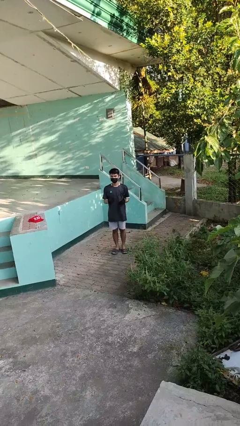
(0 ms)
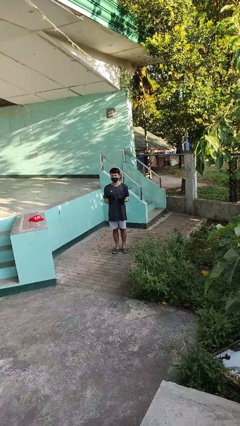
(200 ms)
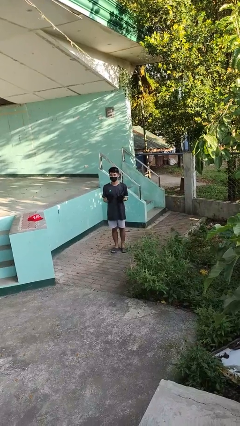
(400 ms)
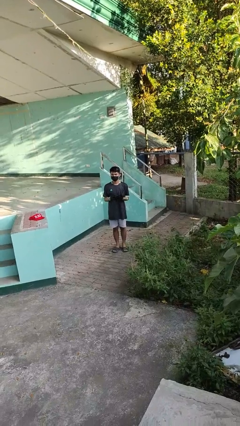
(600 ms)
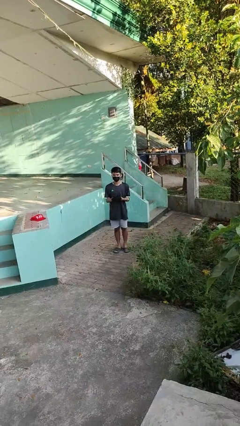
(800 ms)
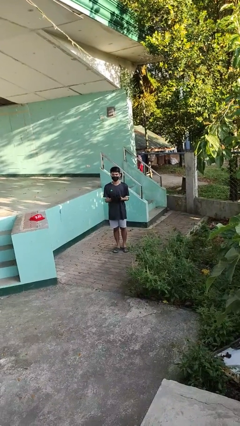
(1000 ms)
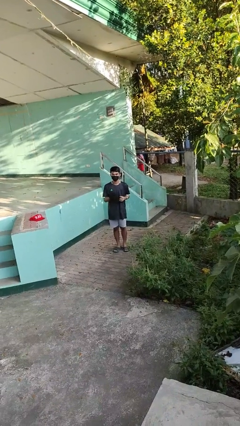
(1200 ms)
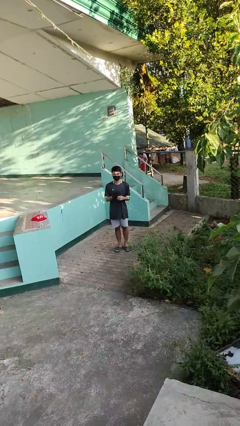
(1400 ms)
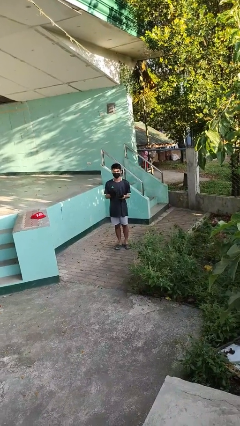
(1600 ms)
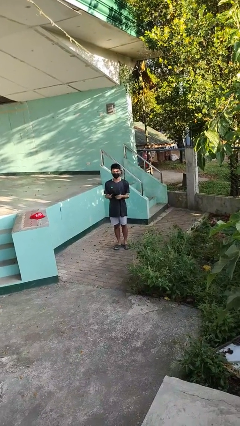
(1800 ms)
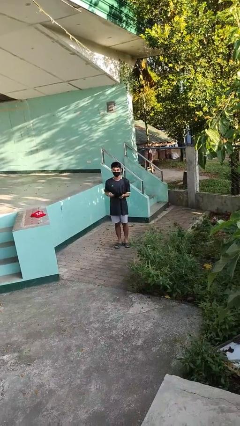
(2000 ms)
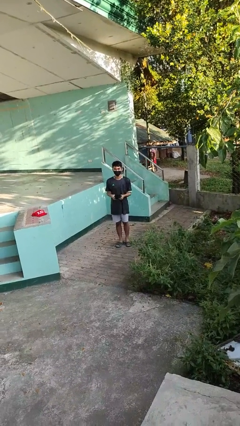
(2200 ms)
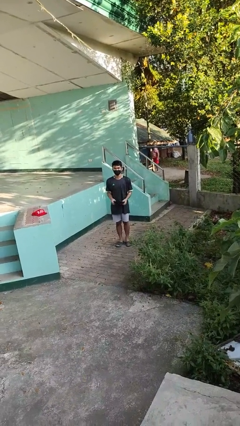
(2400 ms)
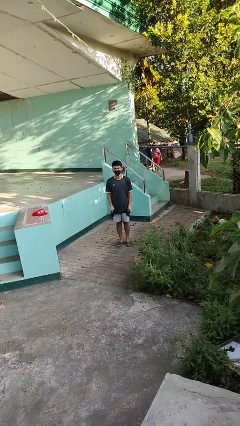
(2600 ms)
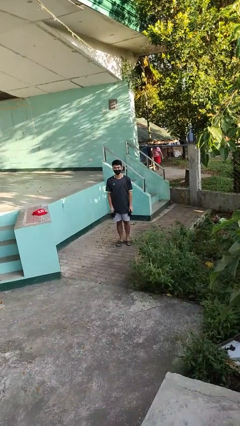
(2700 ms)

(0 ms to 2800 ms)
person takes off gloves

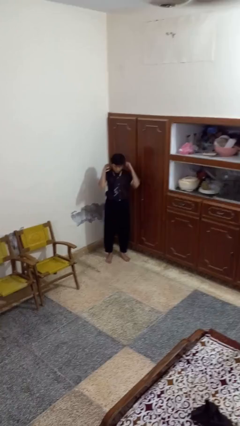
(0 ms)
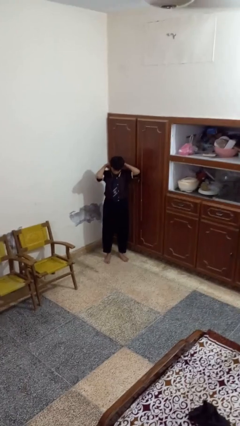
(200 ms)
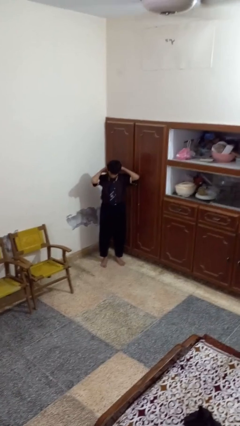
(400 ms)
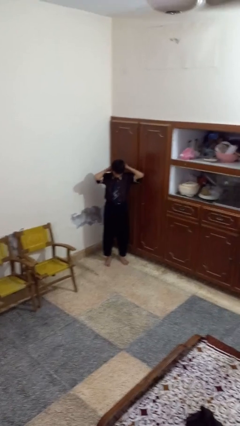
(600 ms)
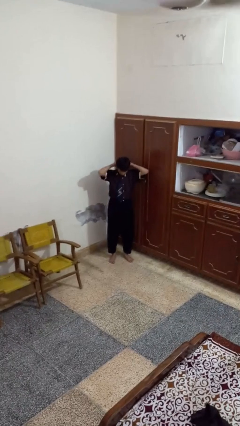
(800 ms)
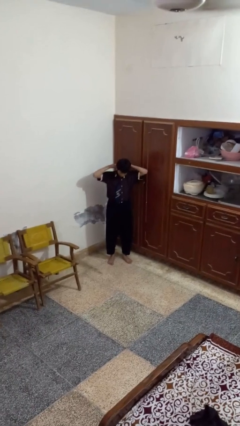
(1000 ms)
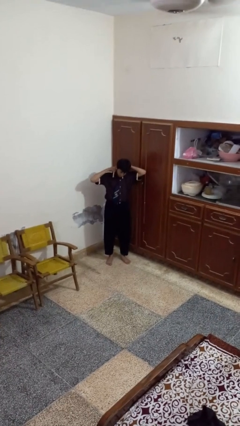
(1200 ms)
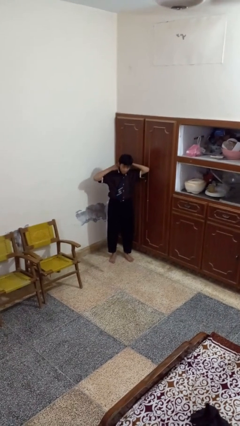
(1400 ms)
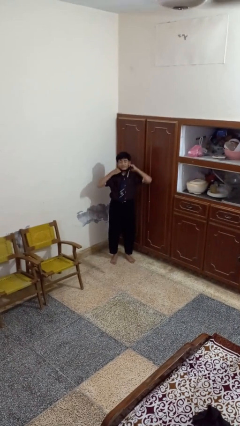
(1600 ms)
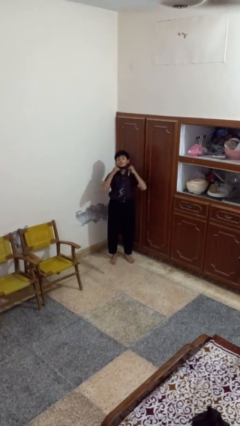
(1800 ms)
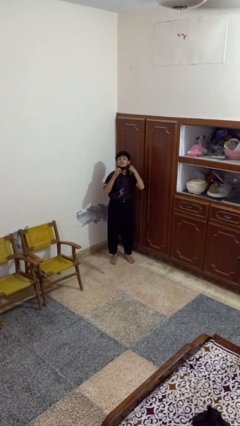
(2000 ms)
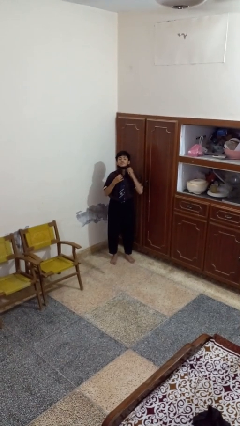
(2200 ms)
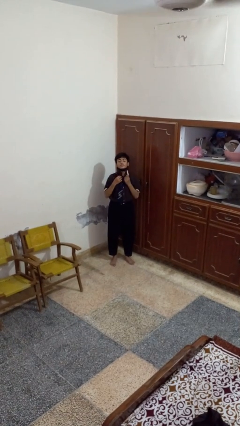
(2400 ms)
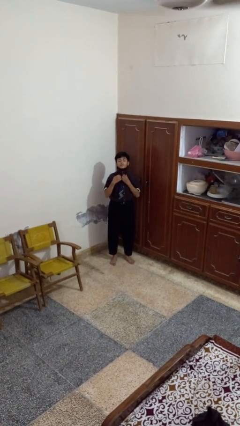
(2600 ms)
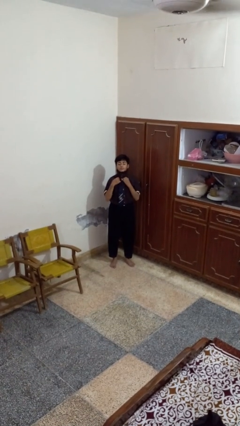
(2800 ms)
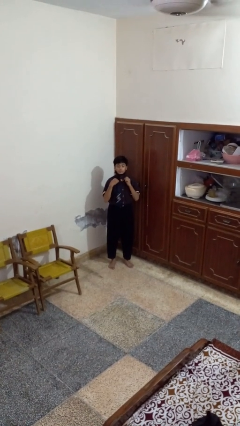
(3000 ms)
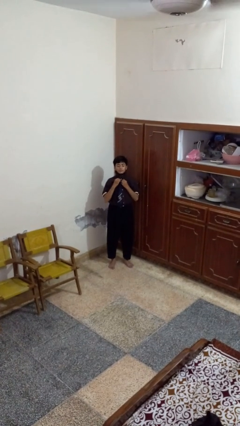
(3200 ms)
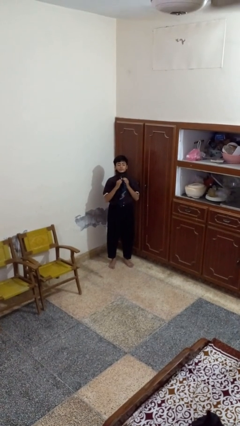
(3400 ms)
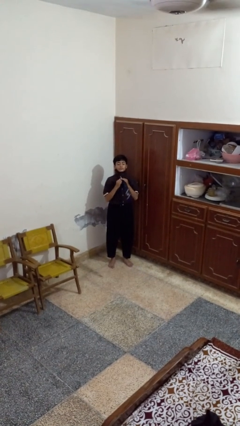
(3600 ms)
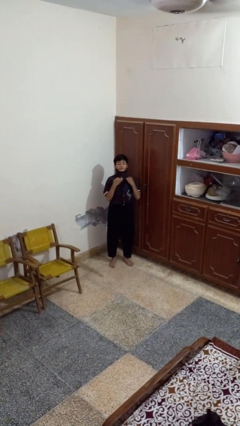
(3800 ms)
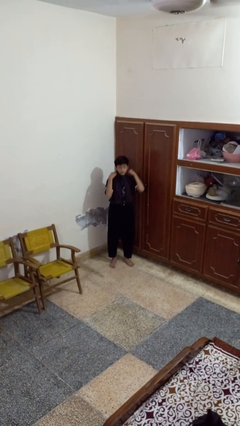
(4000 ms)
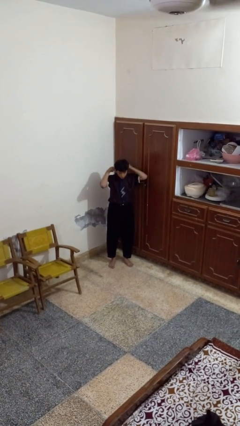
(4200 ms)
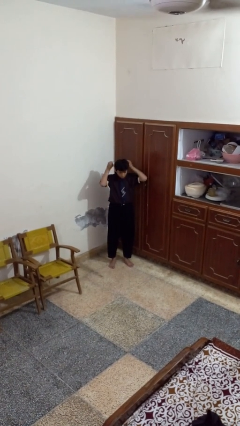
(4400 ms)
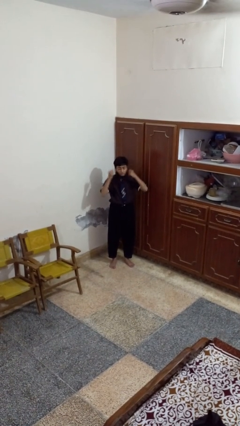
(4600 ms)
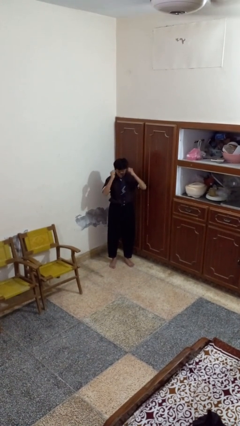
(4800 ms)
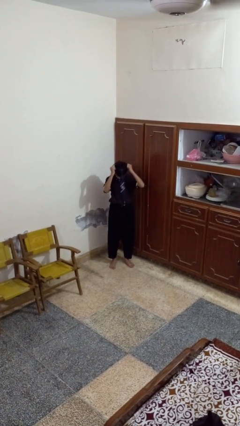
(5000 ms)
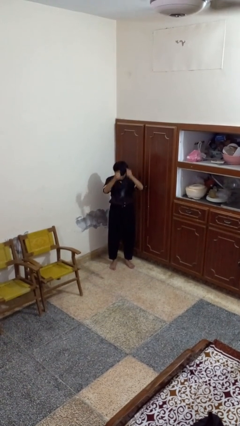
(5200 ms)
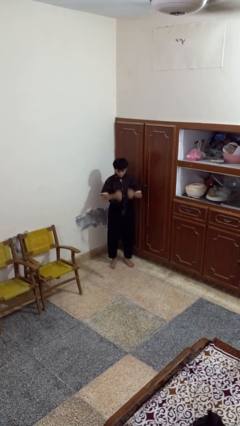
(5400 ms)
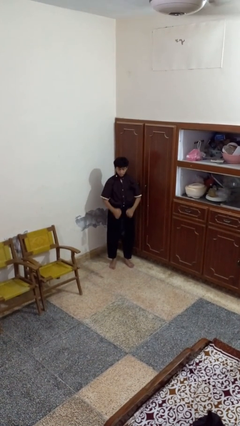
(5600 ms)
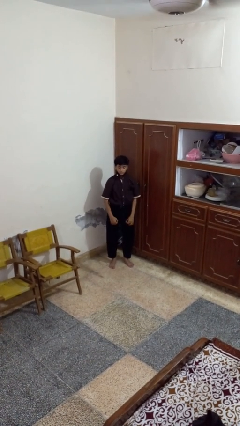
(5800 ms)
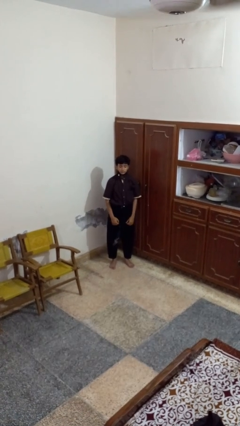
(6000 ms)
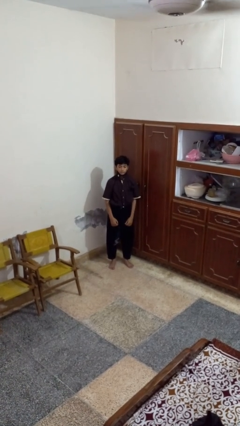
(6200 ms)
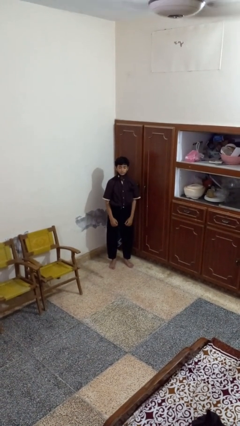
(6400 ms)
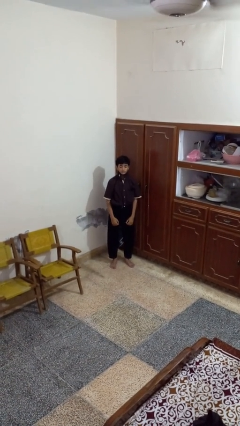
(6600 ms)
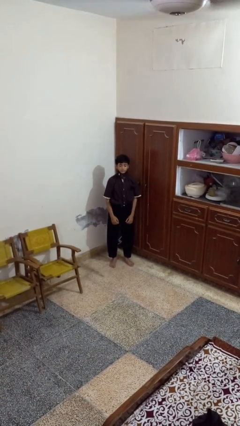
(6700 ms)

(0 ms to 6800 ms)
person takes off necktie

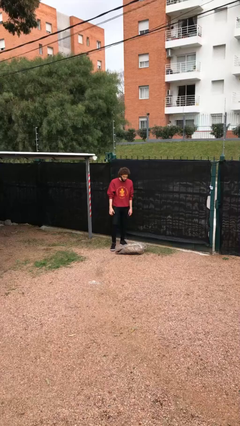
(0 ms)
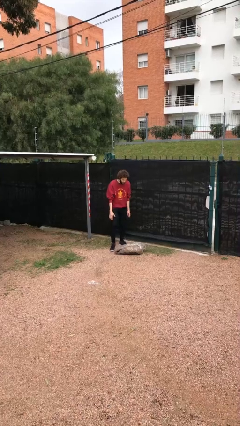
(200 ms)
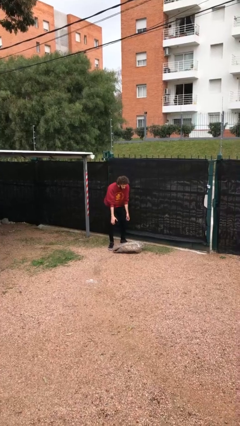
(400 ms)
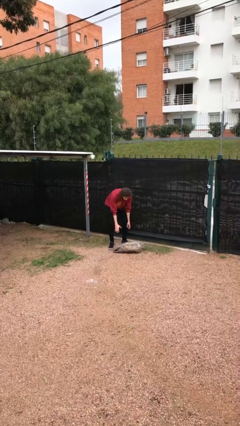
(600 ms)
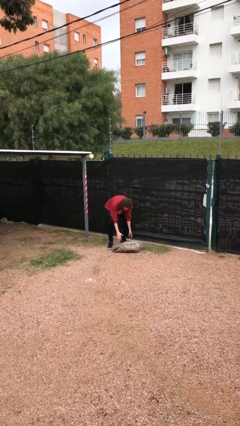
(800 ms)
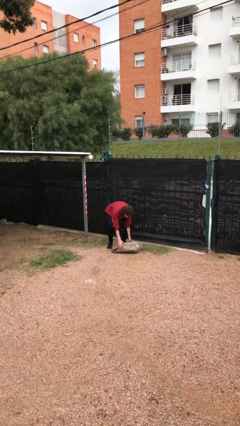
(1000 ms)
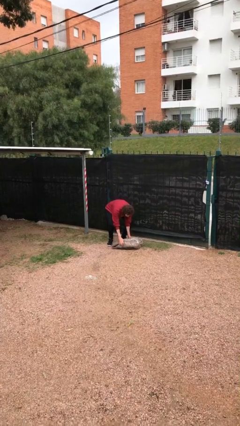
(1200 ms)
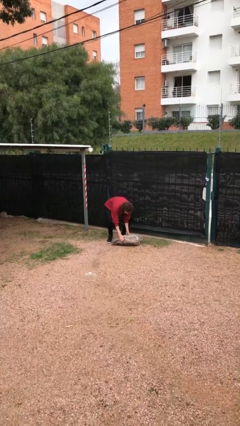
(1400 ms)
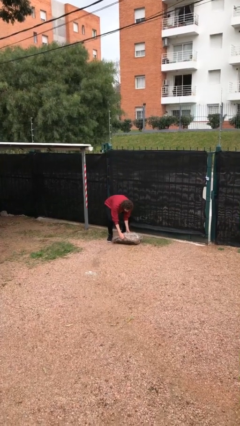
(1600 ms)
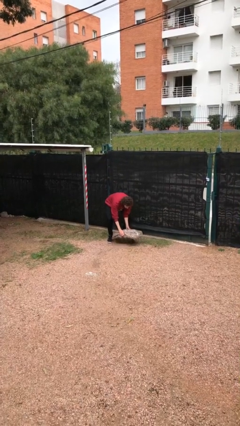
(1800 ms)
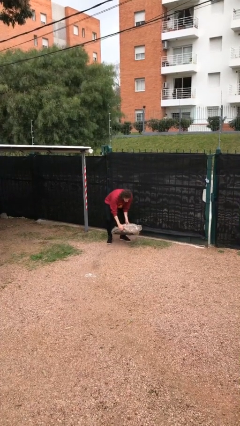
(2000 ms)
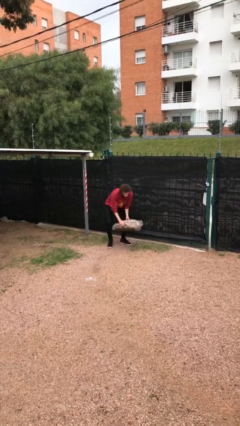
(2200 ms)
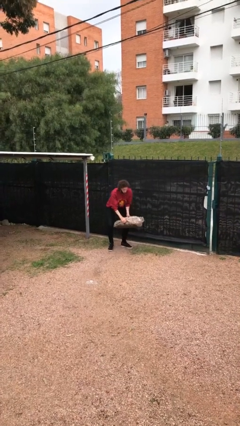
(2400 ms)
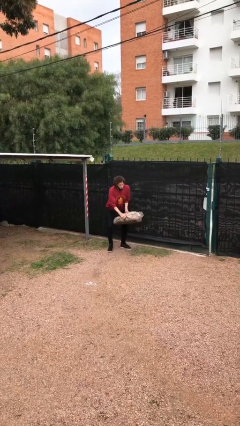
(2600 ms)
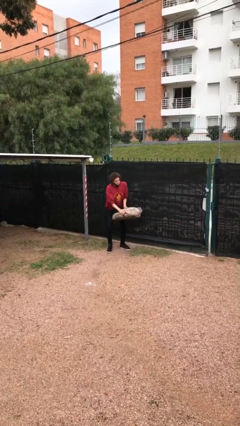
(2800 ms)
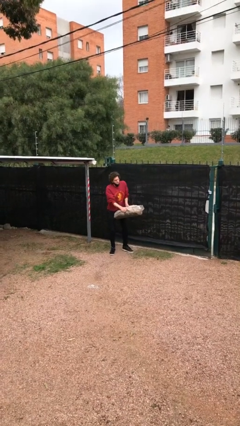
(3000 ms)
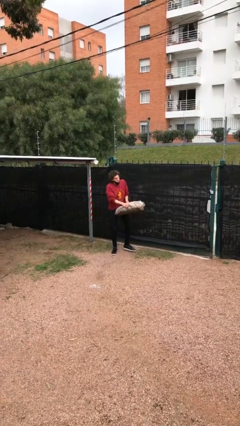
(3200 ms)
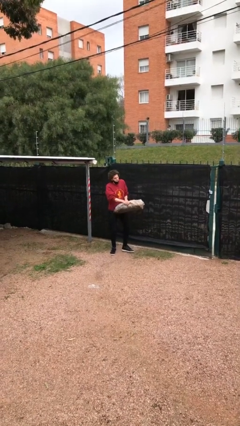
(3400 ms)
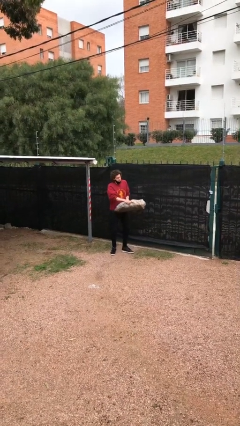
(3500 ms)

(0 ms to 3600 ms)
person picks up object from floor

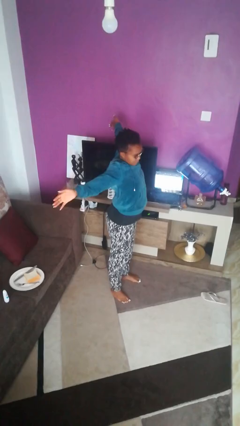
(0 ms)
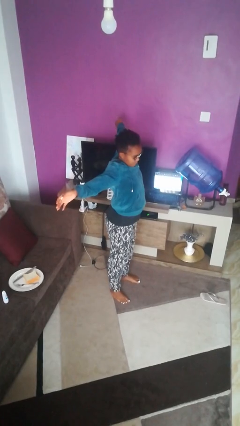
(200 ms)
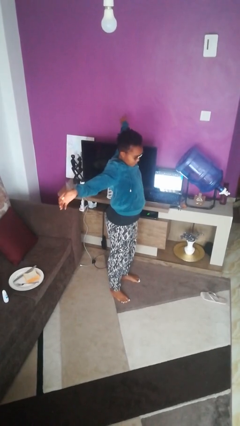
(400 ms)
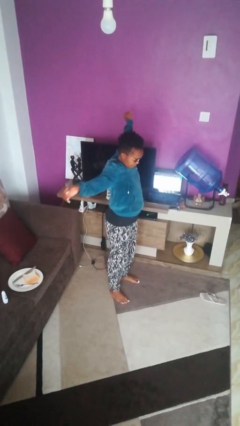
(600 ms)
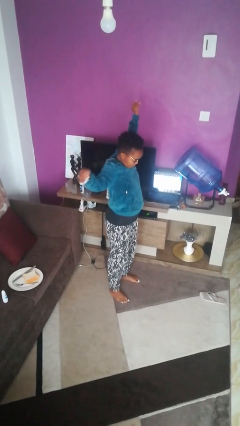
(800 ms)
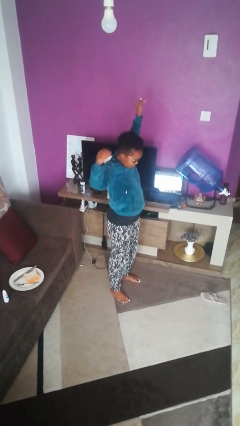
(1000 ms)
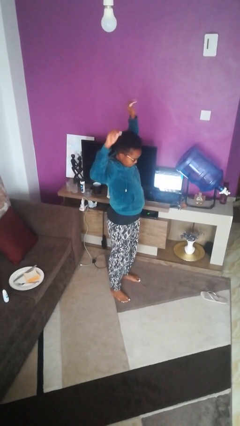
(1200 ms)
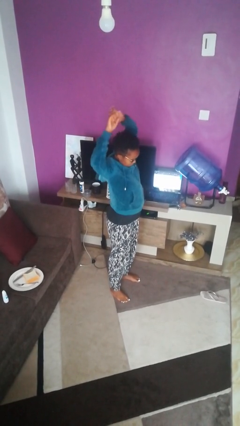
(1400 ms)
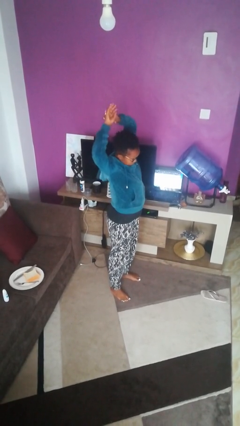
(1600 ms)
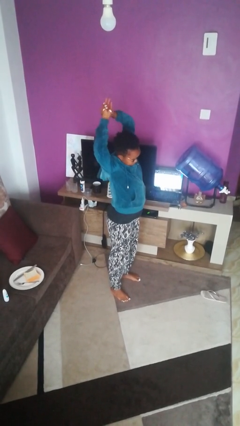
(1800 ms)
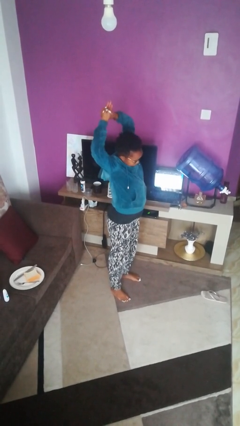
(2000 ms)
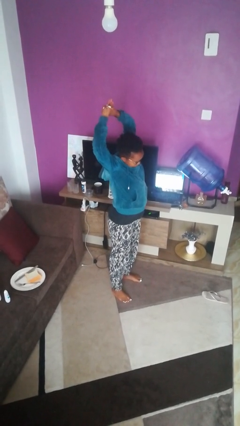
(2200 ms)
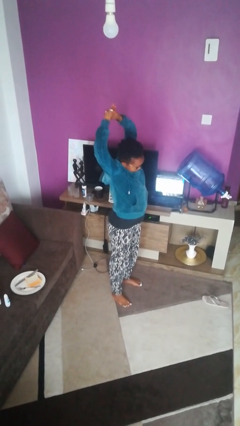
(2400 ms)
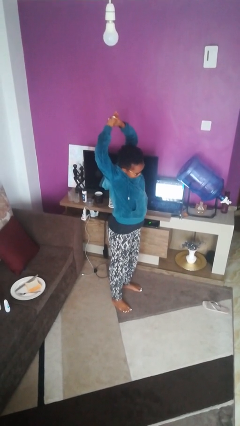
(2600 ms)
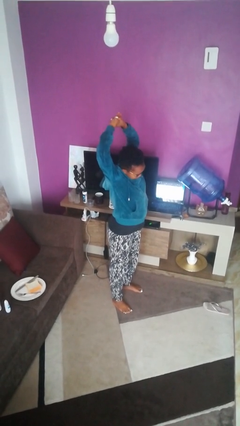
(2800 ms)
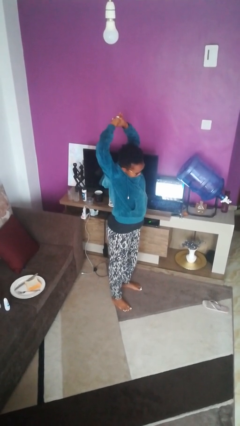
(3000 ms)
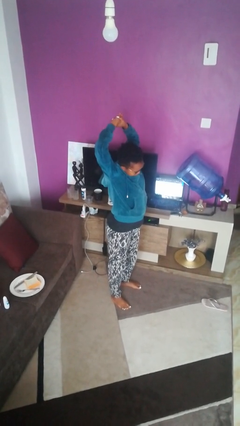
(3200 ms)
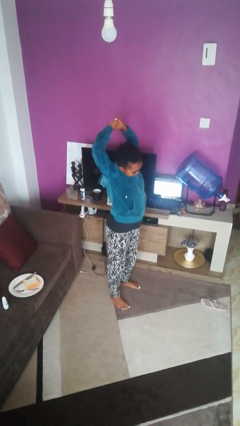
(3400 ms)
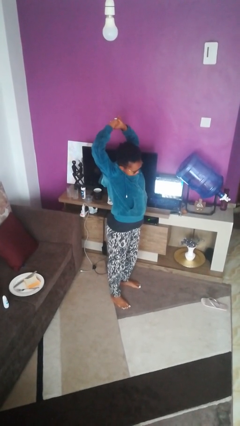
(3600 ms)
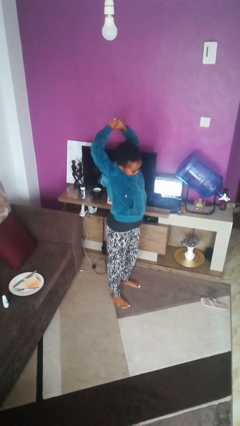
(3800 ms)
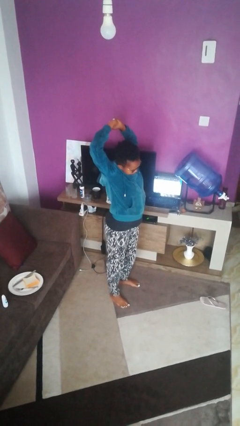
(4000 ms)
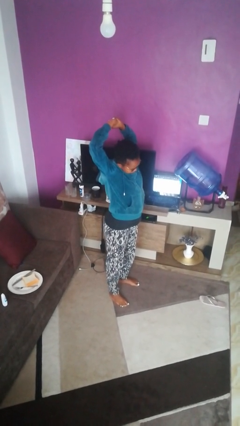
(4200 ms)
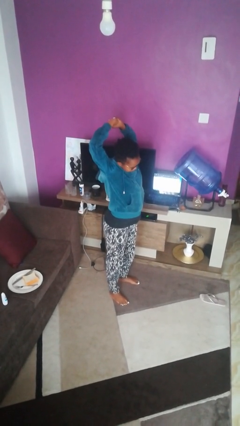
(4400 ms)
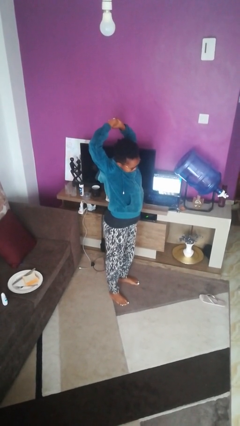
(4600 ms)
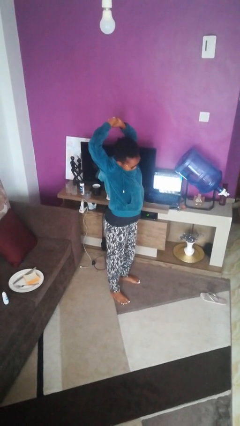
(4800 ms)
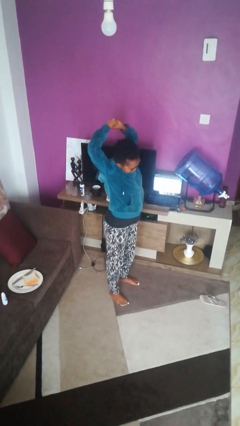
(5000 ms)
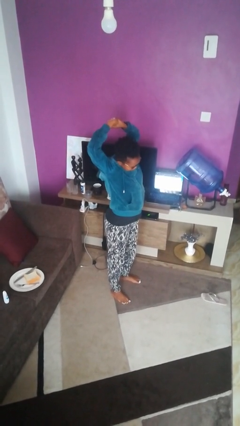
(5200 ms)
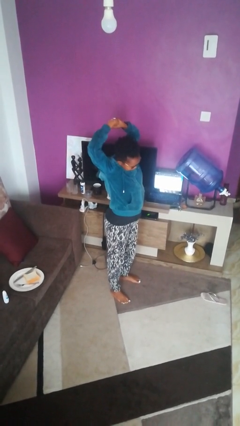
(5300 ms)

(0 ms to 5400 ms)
person stretches arms over head
